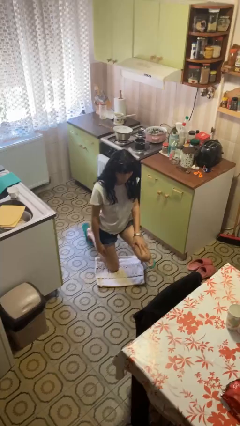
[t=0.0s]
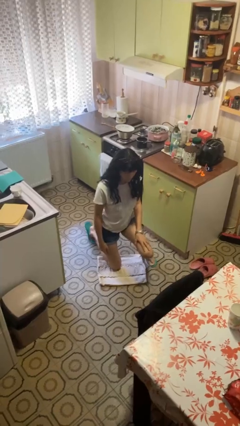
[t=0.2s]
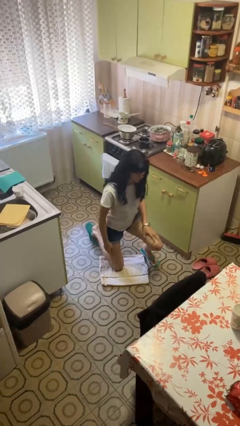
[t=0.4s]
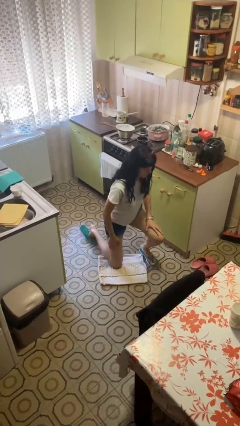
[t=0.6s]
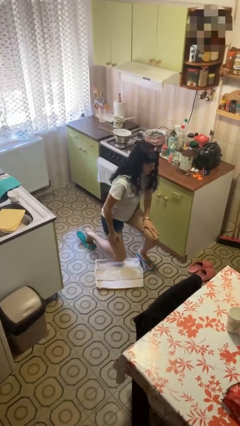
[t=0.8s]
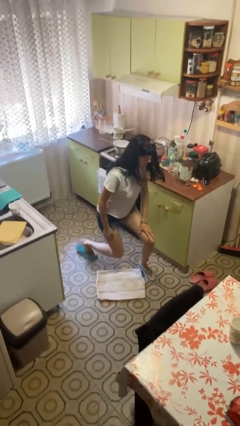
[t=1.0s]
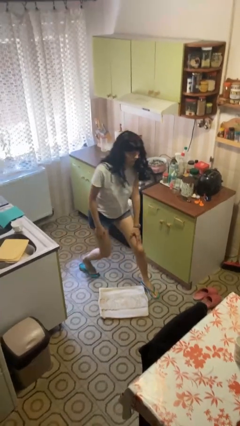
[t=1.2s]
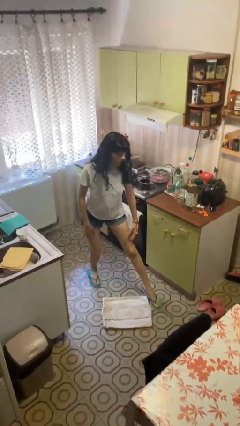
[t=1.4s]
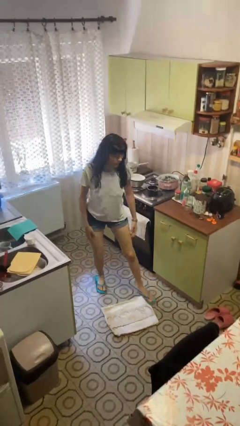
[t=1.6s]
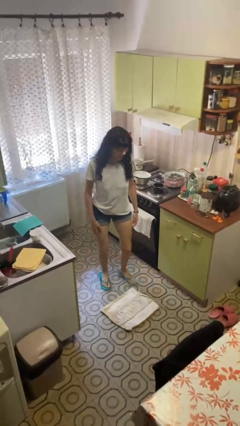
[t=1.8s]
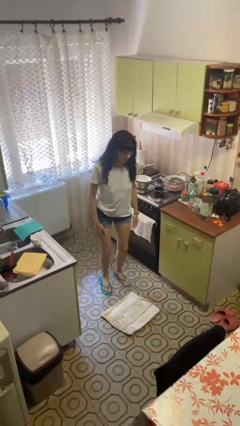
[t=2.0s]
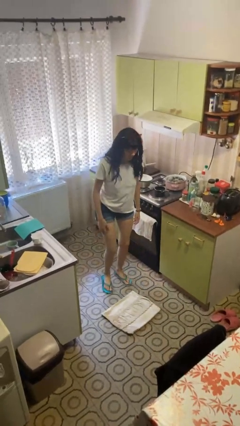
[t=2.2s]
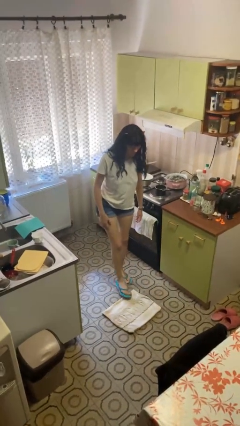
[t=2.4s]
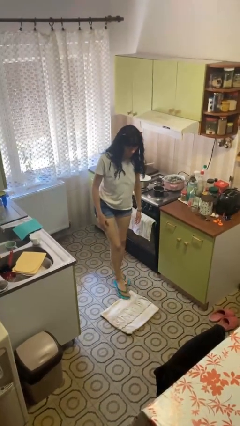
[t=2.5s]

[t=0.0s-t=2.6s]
person stands up from floor

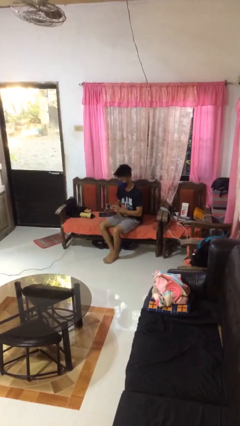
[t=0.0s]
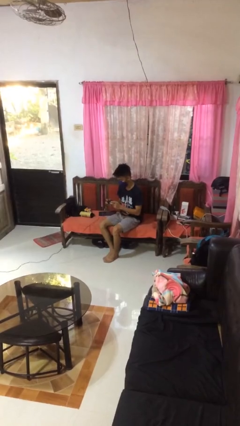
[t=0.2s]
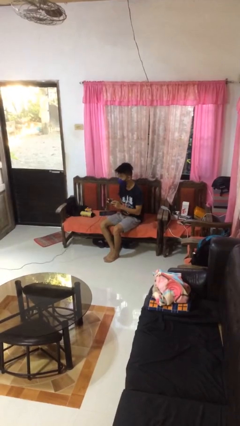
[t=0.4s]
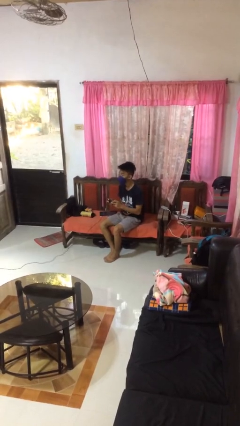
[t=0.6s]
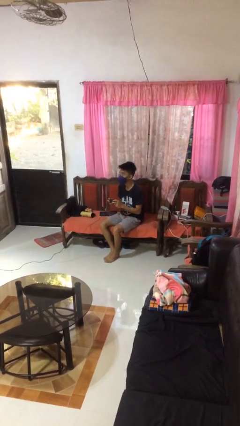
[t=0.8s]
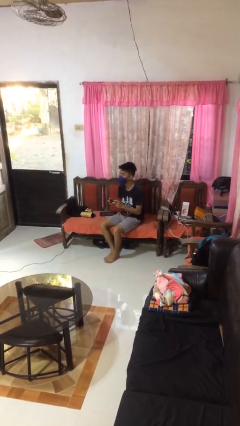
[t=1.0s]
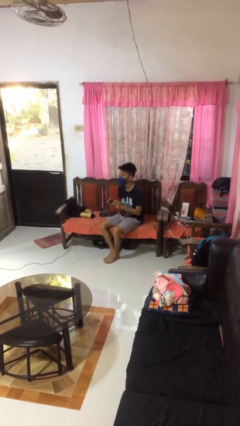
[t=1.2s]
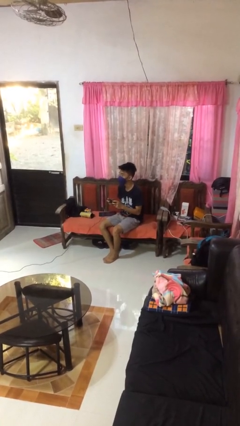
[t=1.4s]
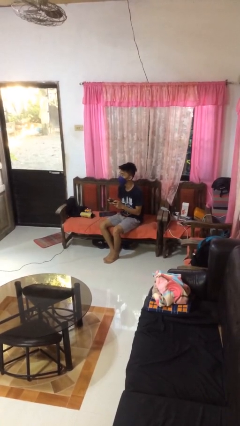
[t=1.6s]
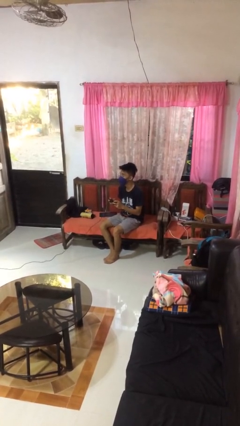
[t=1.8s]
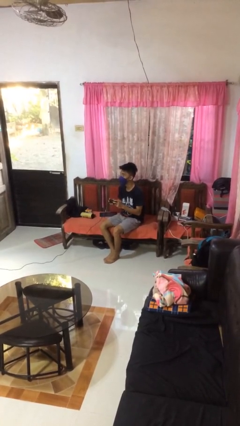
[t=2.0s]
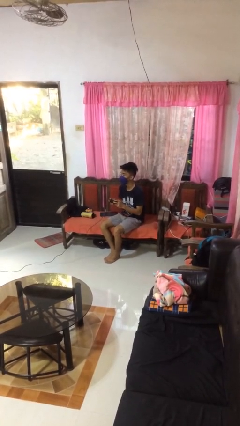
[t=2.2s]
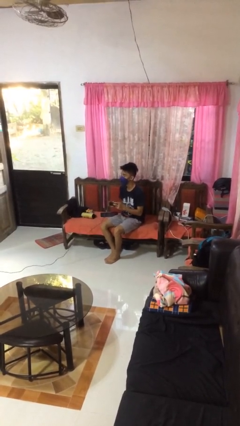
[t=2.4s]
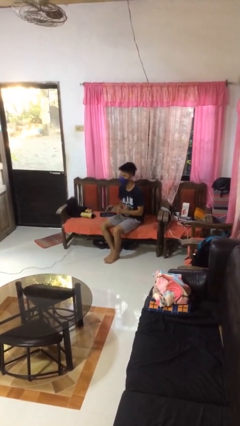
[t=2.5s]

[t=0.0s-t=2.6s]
person interacts with handheld game

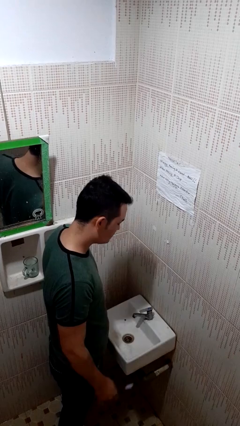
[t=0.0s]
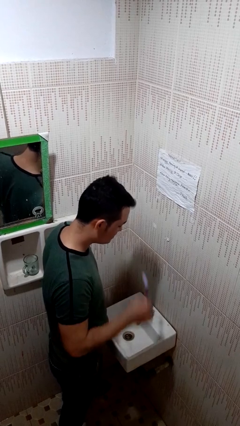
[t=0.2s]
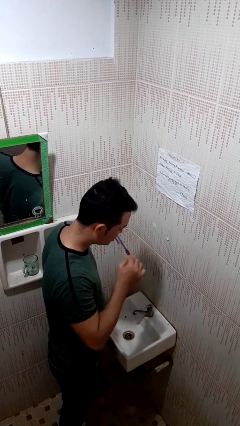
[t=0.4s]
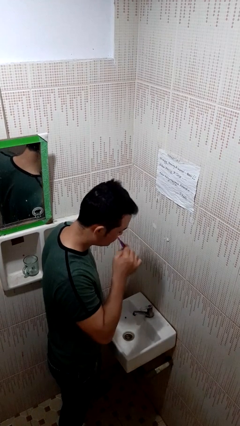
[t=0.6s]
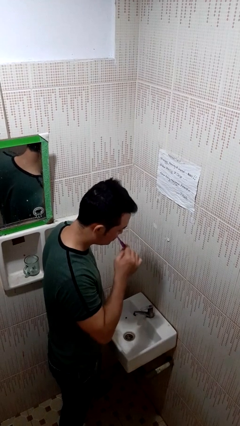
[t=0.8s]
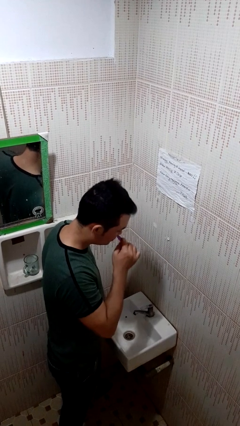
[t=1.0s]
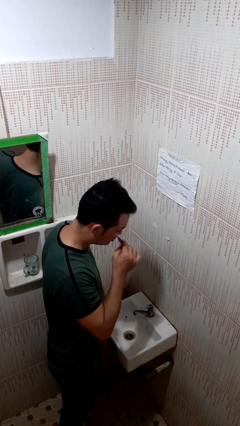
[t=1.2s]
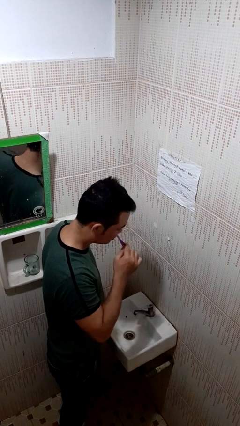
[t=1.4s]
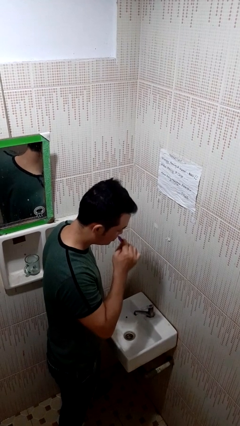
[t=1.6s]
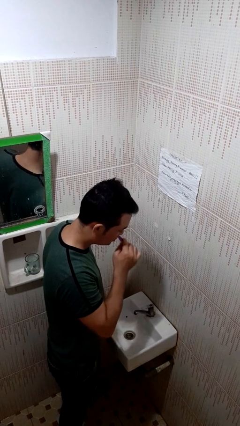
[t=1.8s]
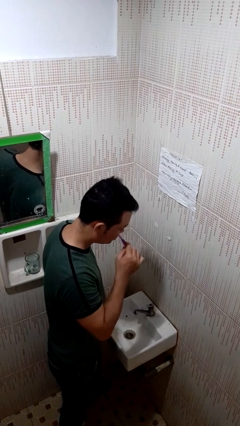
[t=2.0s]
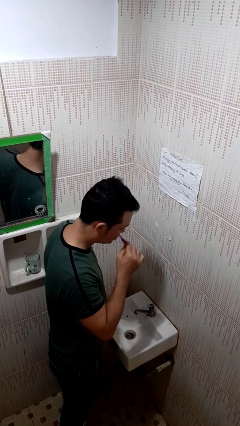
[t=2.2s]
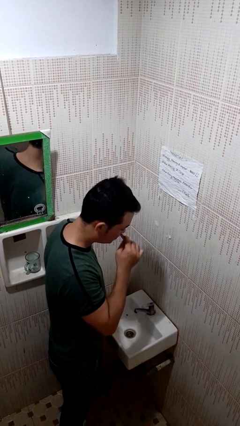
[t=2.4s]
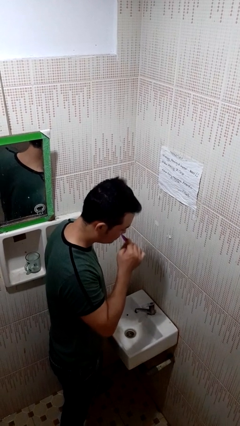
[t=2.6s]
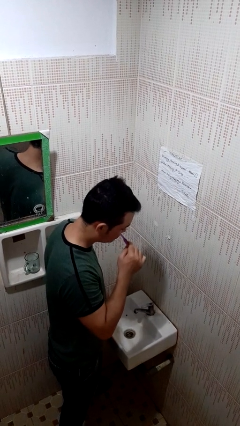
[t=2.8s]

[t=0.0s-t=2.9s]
person brushes teeth

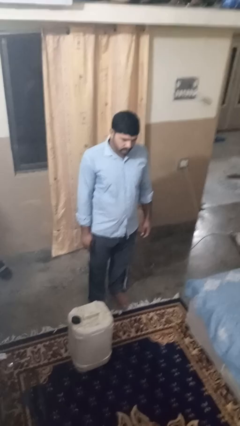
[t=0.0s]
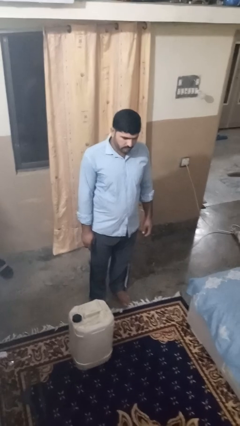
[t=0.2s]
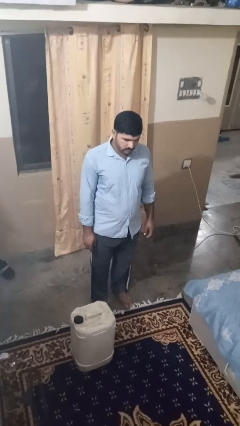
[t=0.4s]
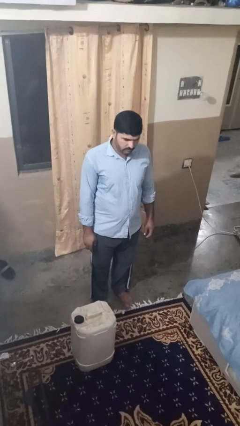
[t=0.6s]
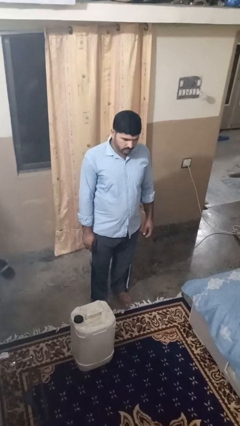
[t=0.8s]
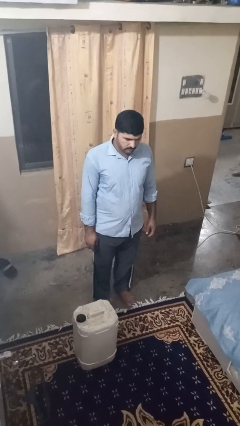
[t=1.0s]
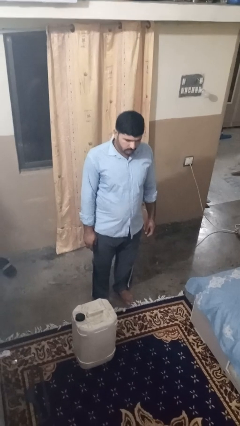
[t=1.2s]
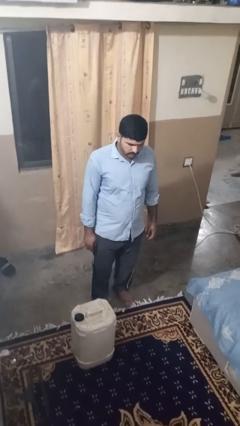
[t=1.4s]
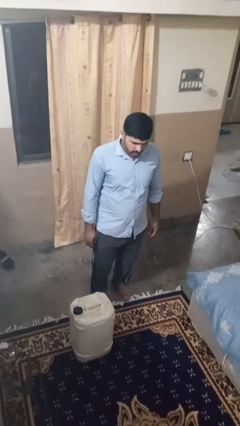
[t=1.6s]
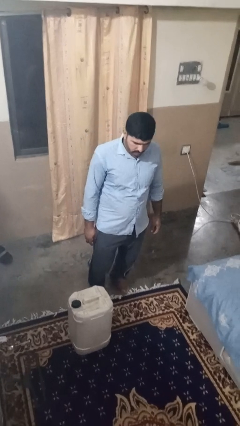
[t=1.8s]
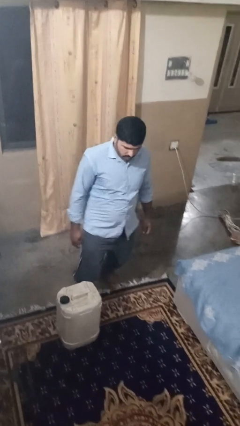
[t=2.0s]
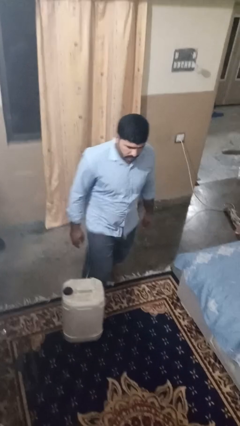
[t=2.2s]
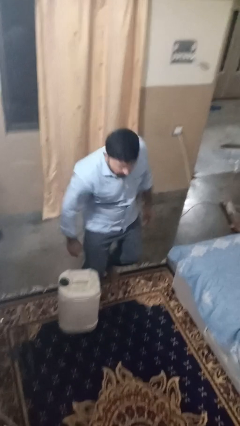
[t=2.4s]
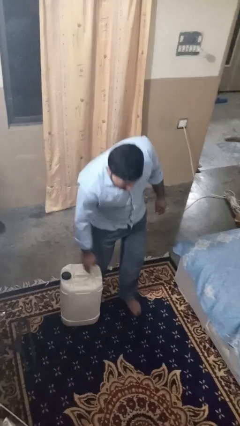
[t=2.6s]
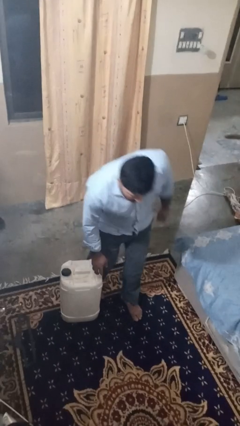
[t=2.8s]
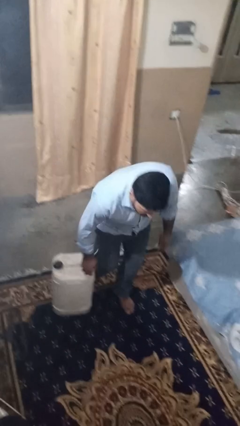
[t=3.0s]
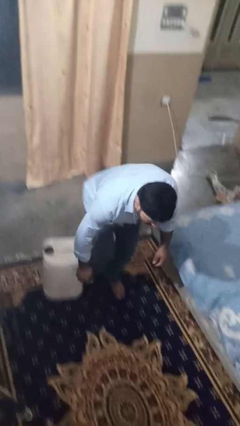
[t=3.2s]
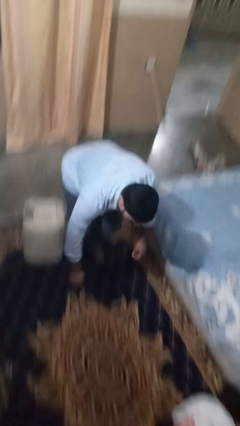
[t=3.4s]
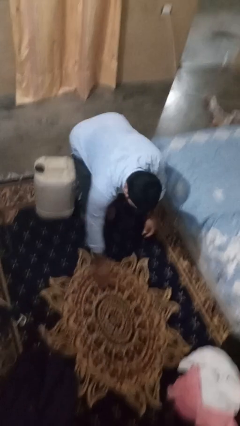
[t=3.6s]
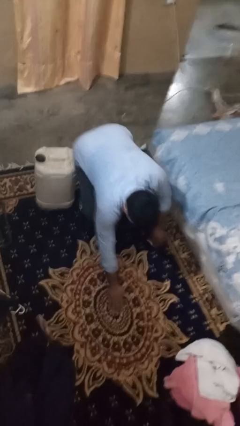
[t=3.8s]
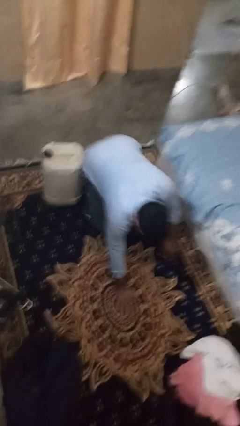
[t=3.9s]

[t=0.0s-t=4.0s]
person trips on object on floor

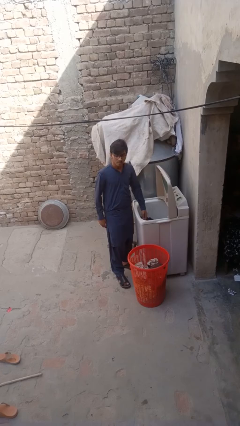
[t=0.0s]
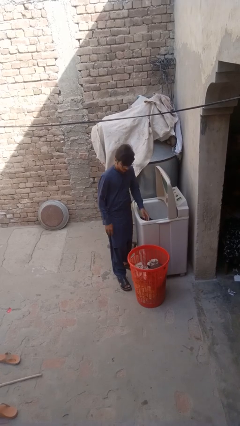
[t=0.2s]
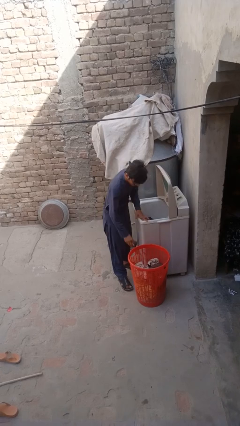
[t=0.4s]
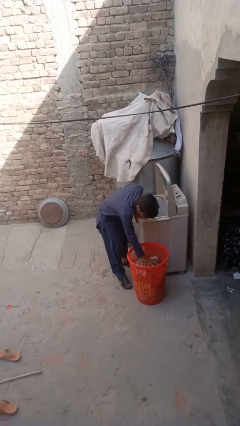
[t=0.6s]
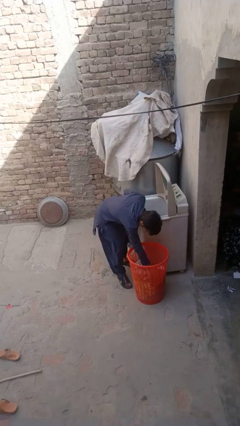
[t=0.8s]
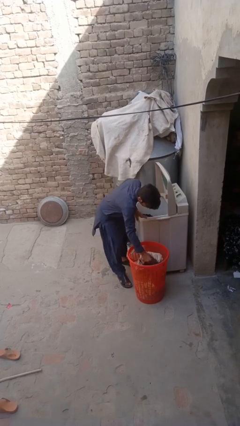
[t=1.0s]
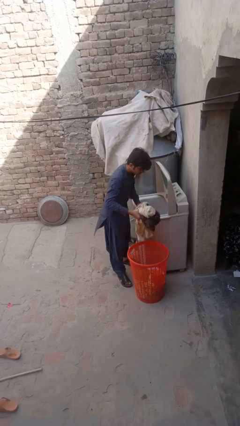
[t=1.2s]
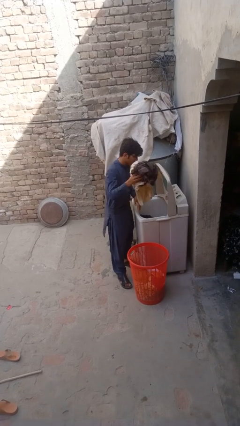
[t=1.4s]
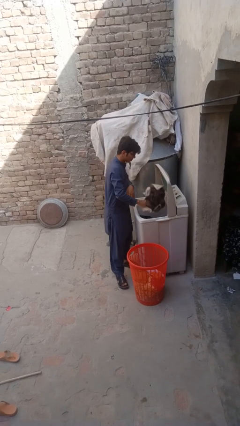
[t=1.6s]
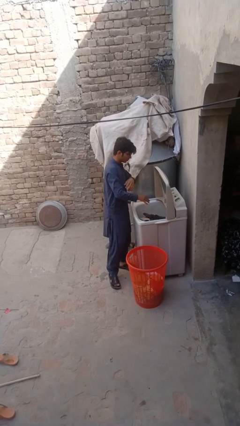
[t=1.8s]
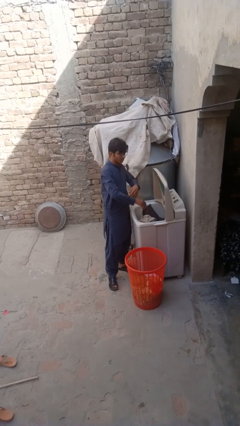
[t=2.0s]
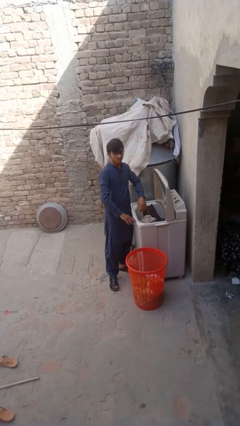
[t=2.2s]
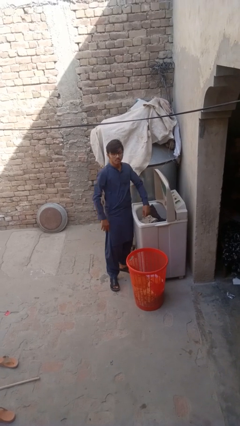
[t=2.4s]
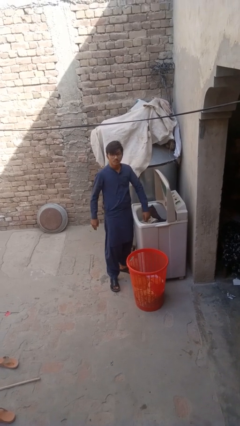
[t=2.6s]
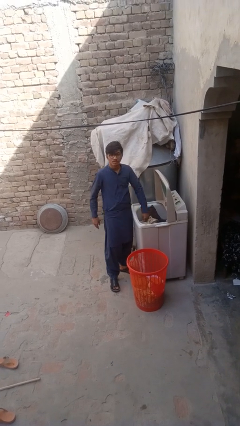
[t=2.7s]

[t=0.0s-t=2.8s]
person loads clotheswasher

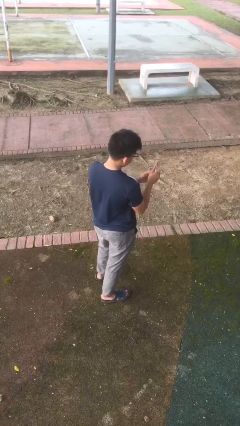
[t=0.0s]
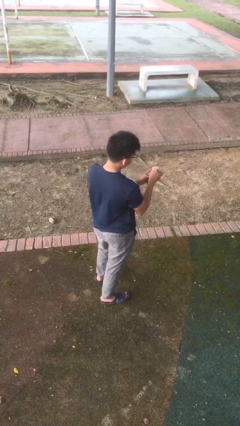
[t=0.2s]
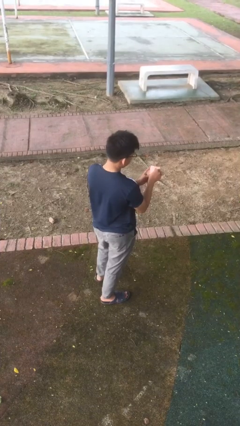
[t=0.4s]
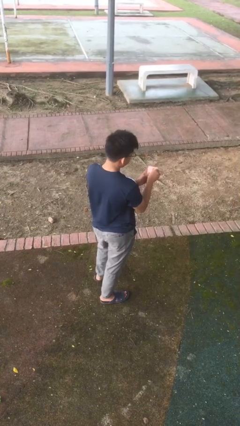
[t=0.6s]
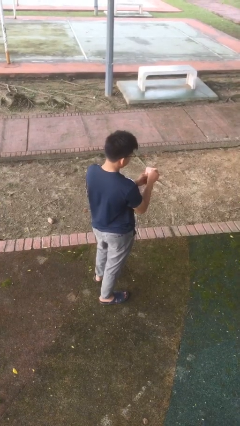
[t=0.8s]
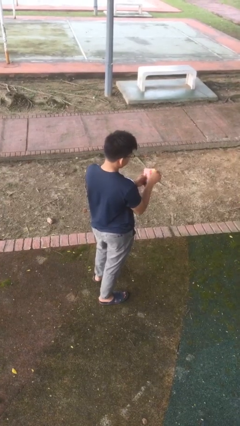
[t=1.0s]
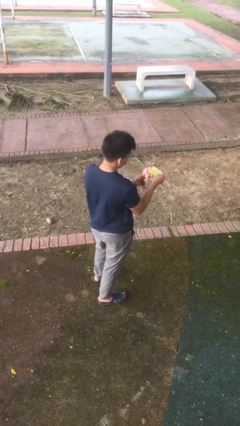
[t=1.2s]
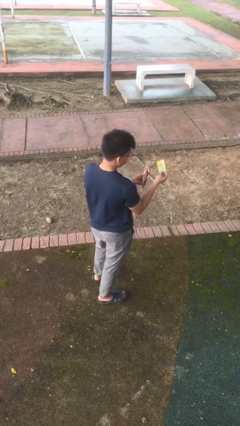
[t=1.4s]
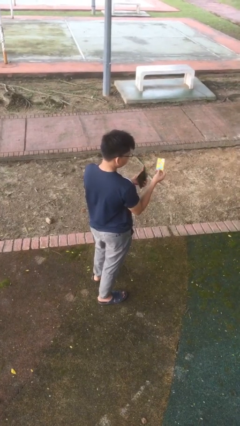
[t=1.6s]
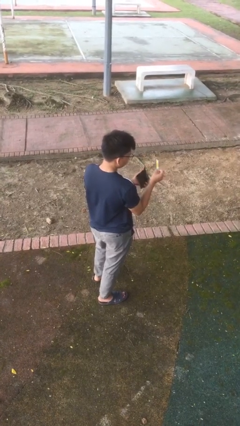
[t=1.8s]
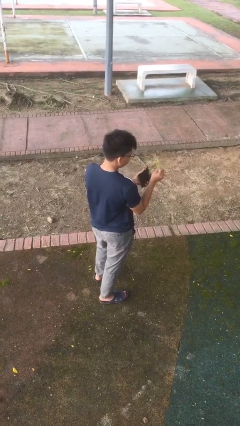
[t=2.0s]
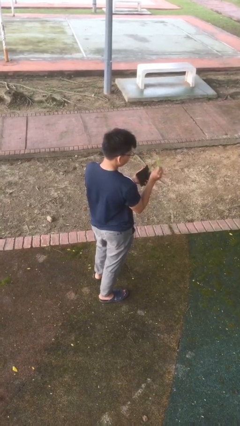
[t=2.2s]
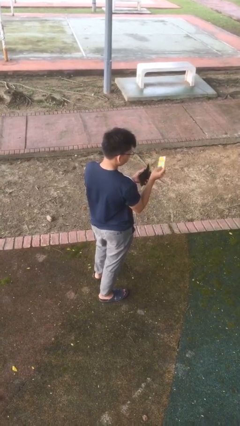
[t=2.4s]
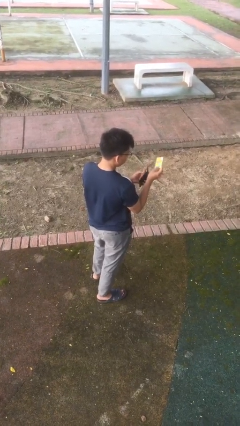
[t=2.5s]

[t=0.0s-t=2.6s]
person takes object from purse

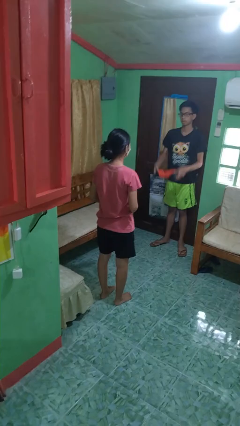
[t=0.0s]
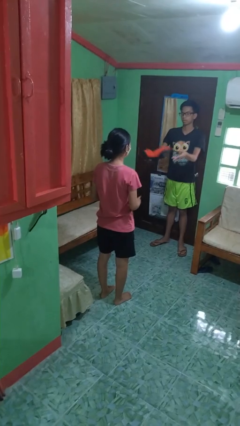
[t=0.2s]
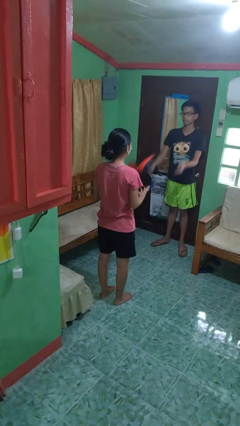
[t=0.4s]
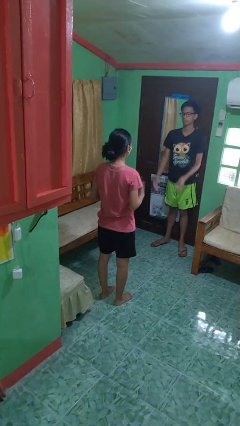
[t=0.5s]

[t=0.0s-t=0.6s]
person catches object from person
